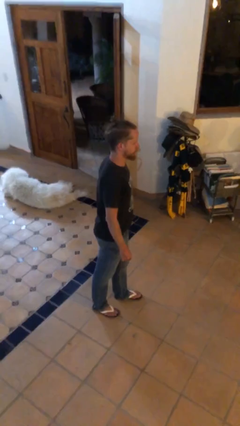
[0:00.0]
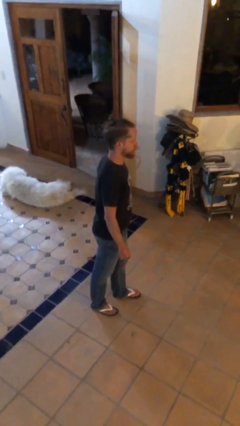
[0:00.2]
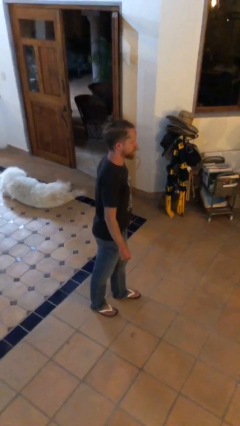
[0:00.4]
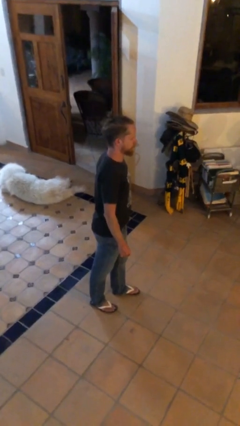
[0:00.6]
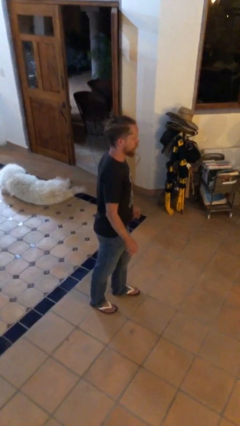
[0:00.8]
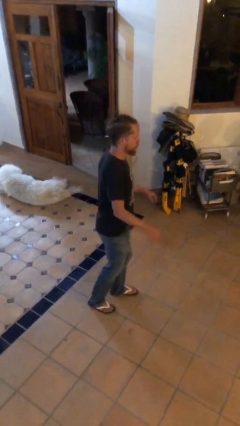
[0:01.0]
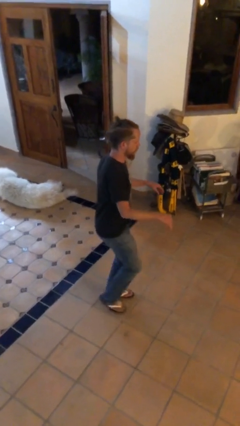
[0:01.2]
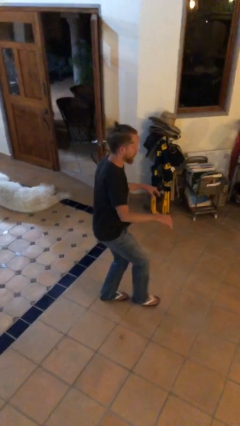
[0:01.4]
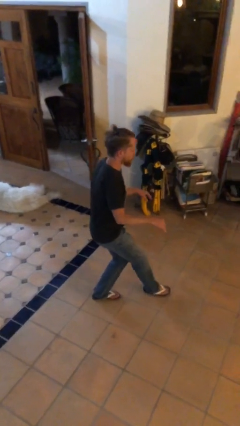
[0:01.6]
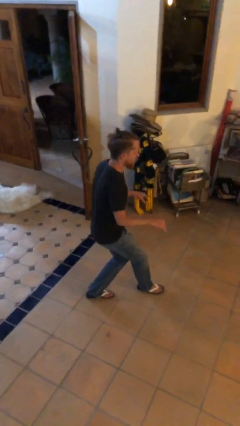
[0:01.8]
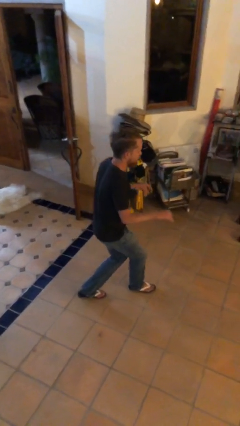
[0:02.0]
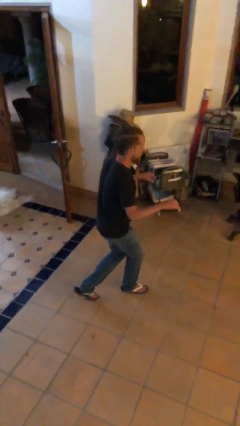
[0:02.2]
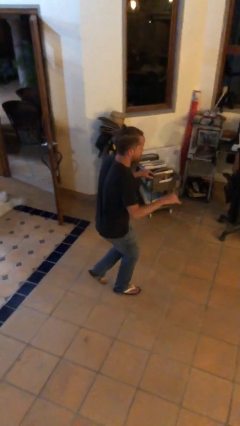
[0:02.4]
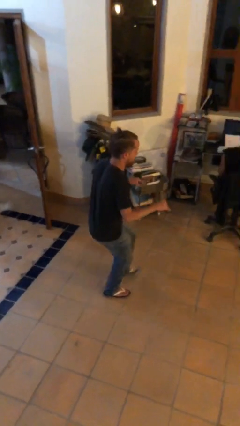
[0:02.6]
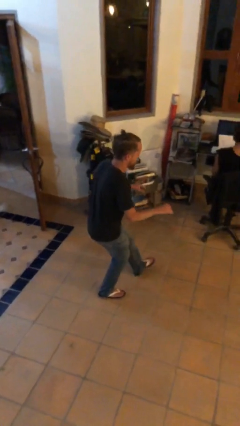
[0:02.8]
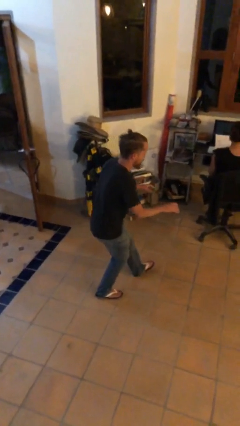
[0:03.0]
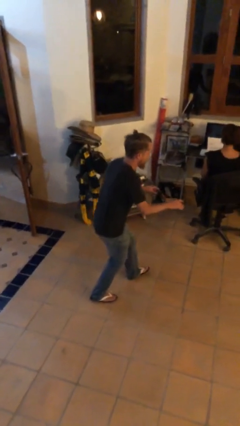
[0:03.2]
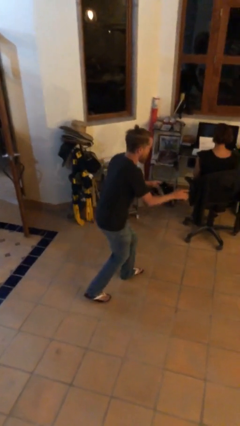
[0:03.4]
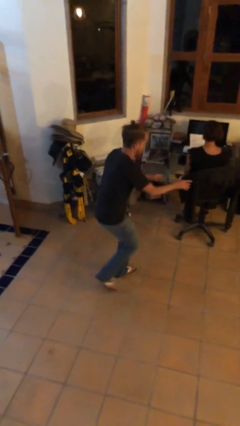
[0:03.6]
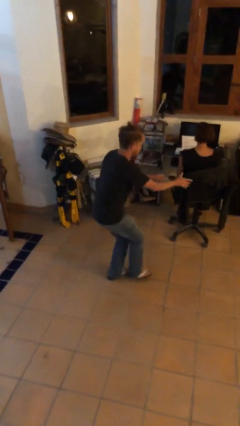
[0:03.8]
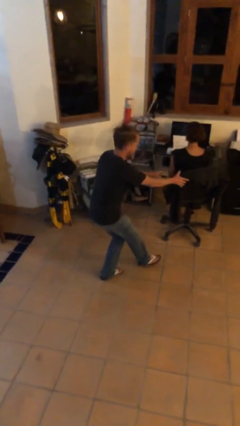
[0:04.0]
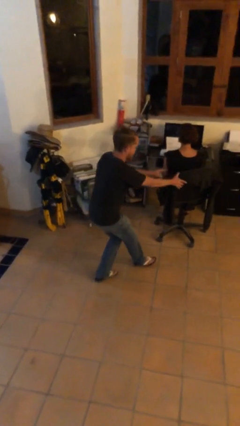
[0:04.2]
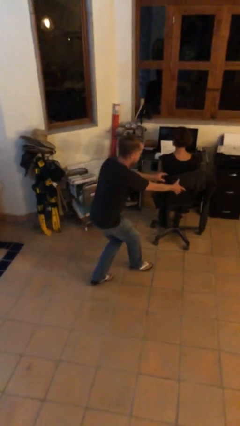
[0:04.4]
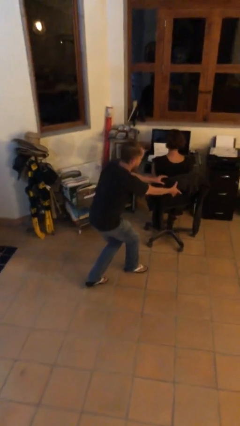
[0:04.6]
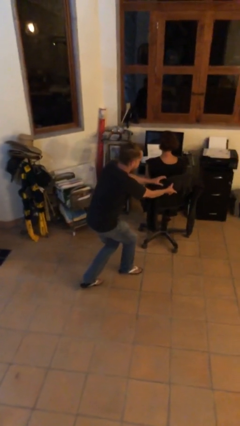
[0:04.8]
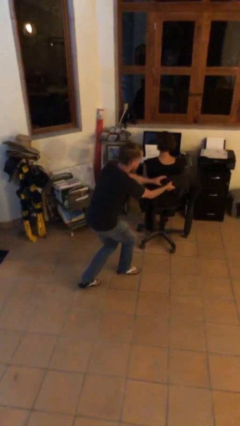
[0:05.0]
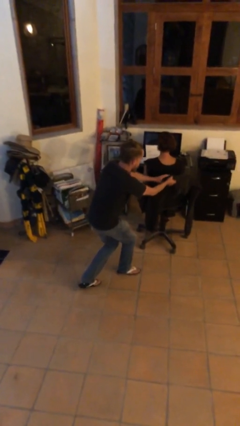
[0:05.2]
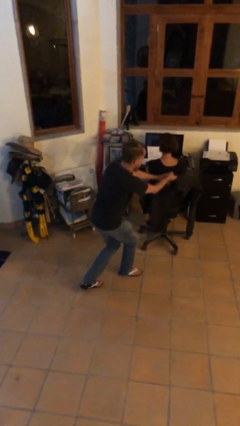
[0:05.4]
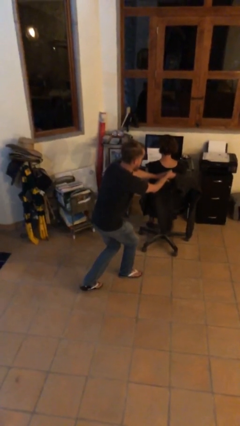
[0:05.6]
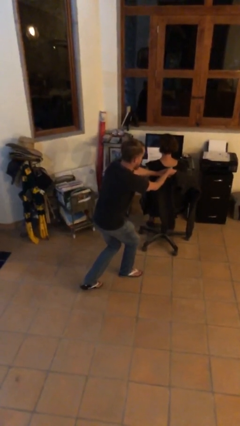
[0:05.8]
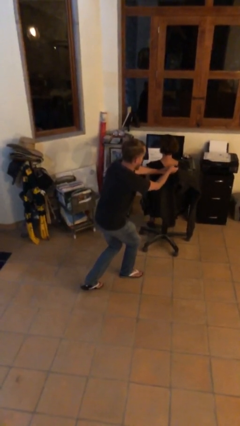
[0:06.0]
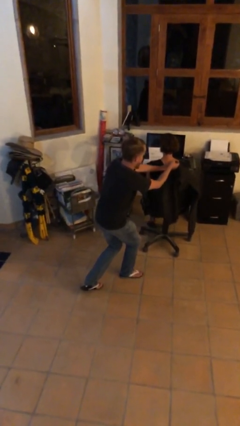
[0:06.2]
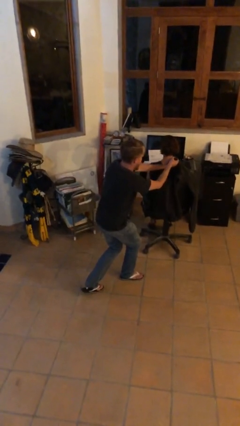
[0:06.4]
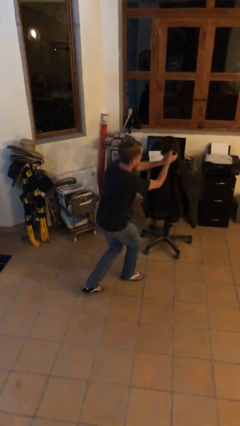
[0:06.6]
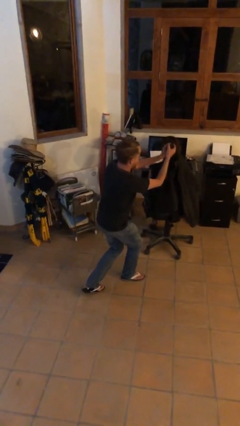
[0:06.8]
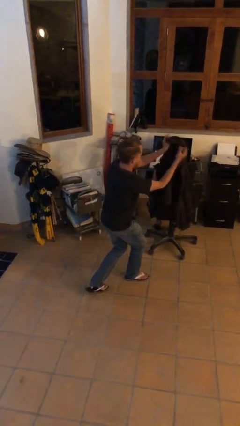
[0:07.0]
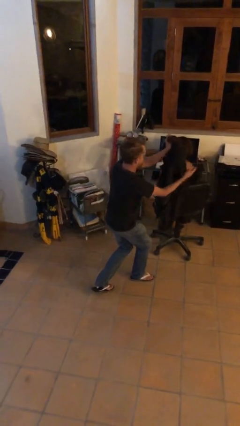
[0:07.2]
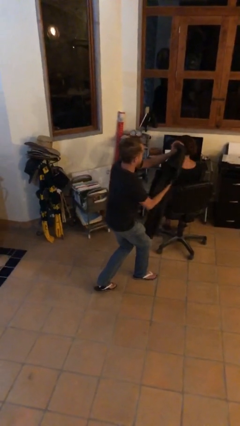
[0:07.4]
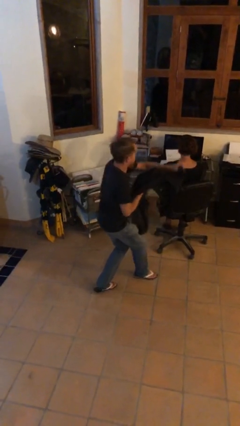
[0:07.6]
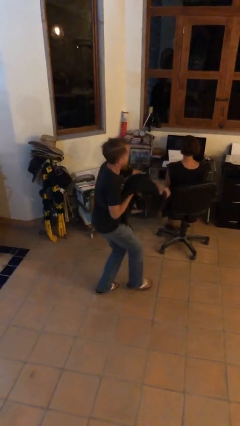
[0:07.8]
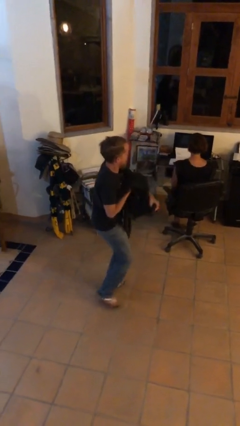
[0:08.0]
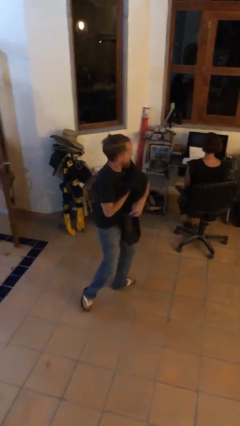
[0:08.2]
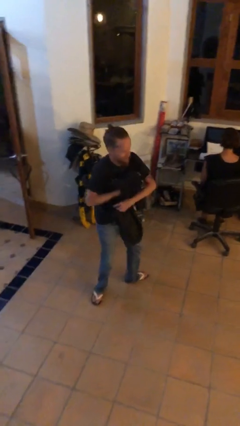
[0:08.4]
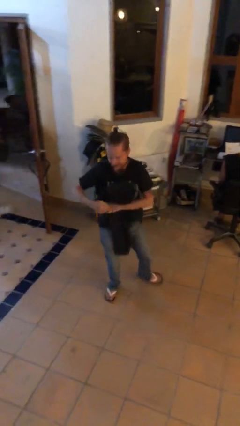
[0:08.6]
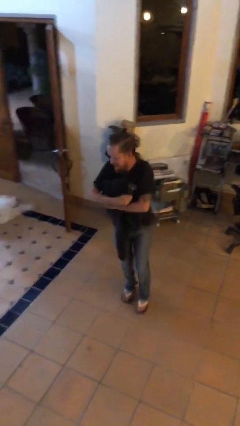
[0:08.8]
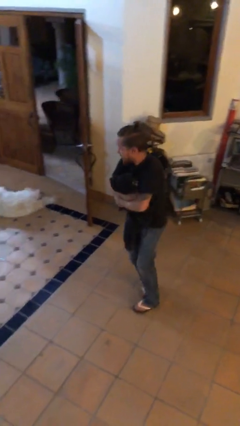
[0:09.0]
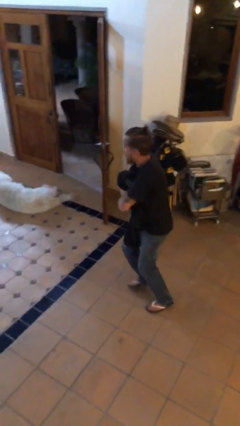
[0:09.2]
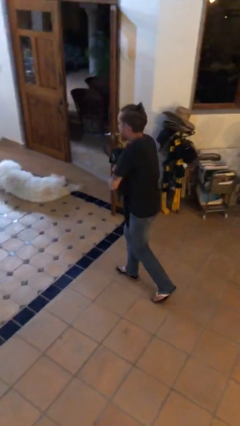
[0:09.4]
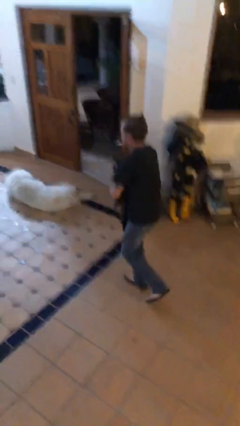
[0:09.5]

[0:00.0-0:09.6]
person steals object from person

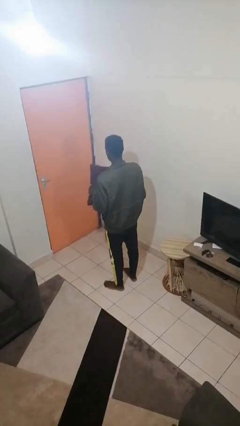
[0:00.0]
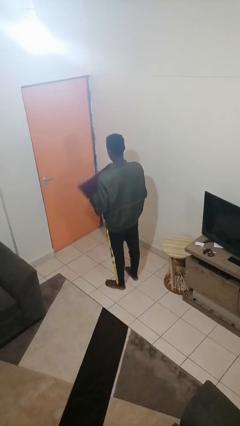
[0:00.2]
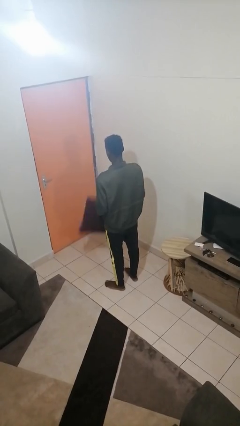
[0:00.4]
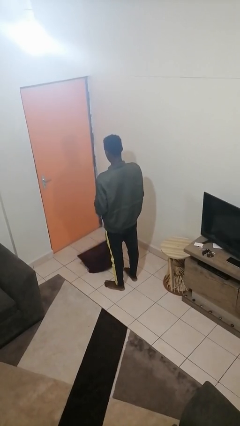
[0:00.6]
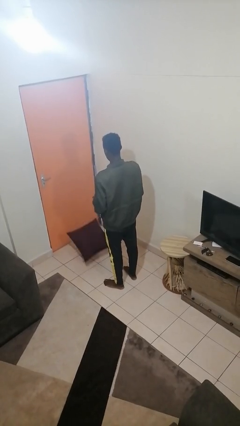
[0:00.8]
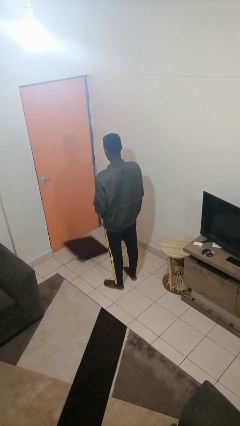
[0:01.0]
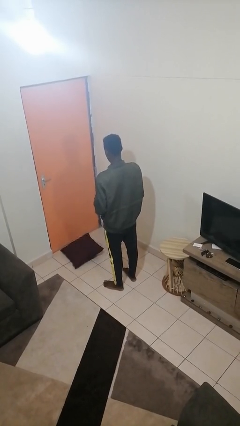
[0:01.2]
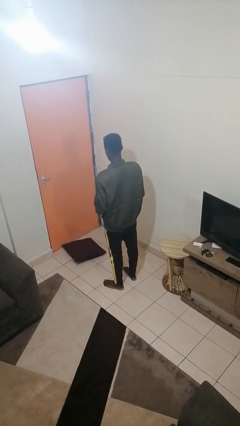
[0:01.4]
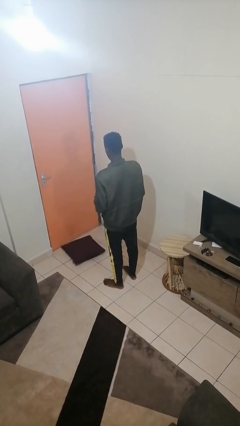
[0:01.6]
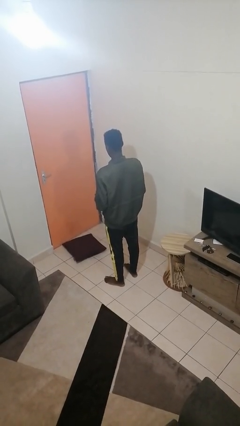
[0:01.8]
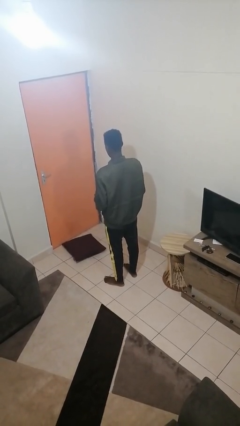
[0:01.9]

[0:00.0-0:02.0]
person drops object

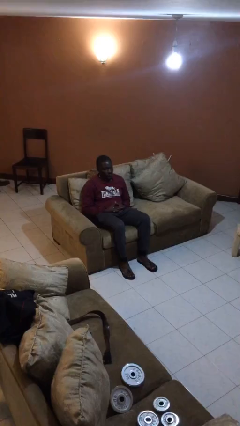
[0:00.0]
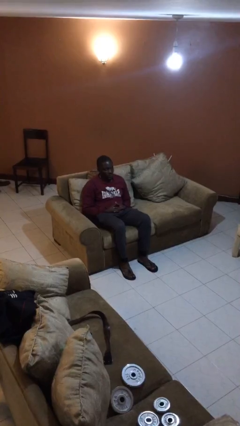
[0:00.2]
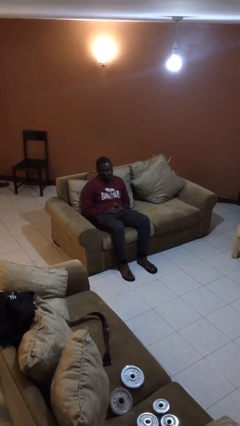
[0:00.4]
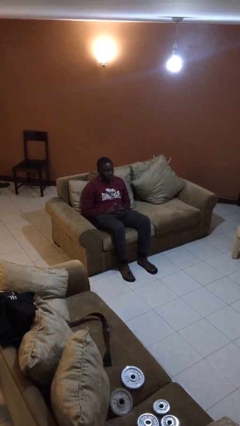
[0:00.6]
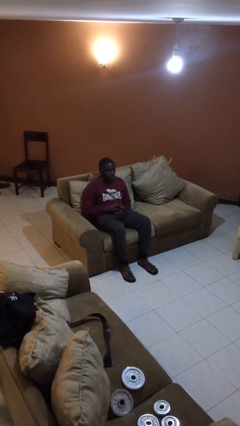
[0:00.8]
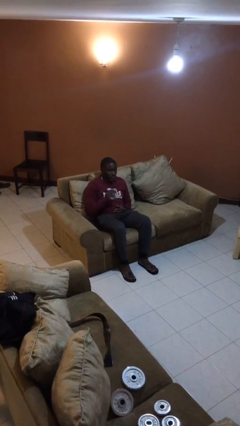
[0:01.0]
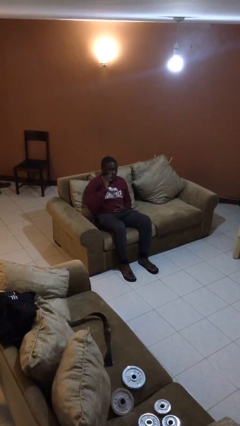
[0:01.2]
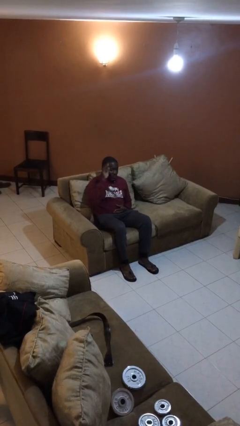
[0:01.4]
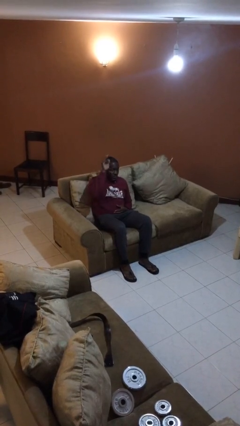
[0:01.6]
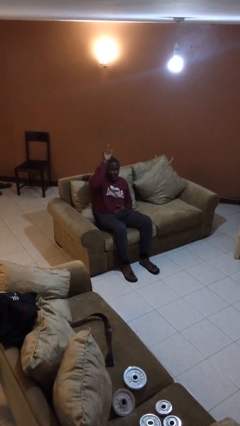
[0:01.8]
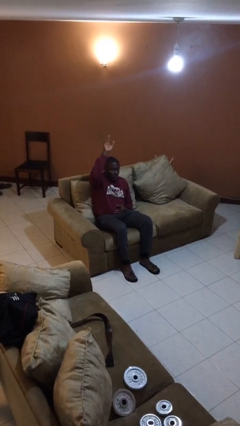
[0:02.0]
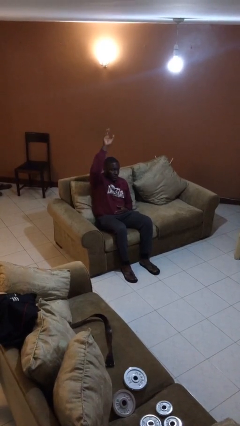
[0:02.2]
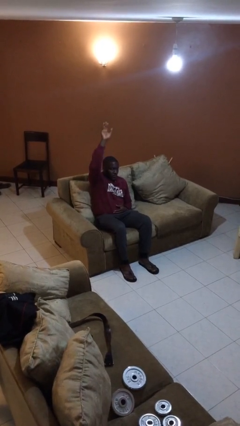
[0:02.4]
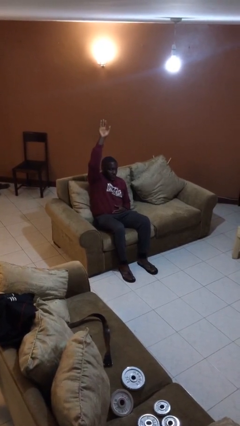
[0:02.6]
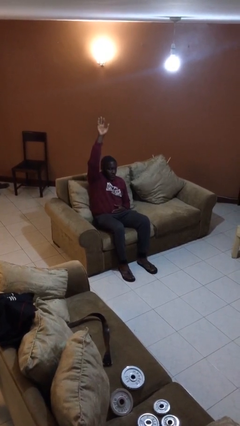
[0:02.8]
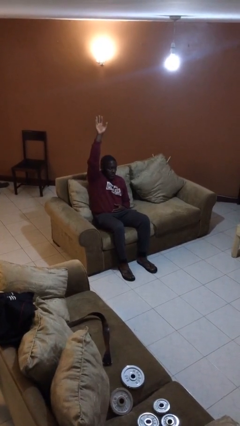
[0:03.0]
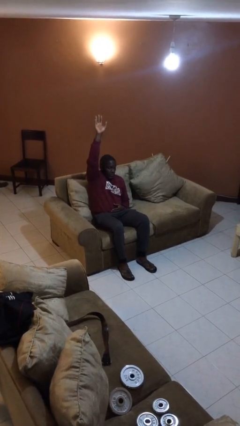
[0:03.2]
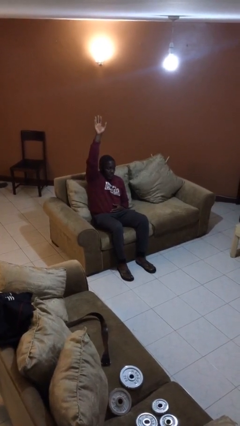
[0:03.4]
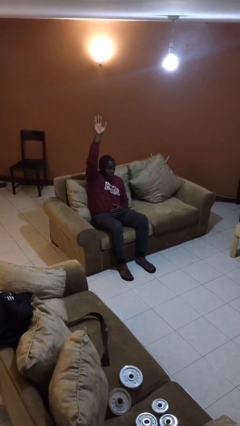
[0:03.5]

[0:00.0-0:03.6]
person gestures raise hand

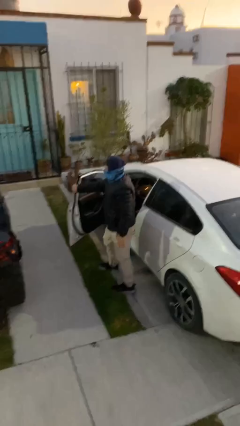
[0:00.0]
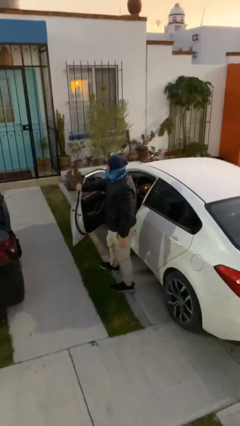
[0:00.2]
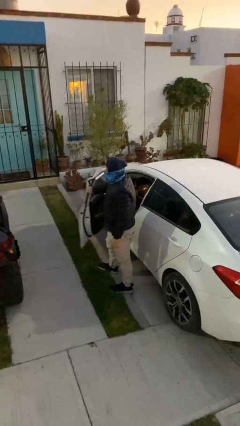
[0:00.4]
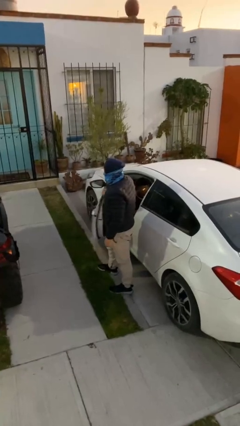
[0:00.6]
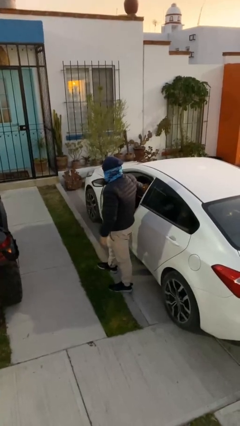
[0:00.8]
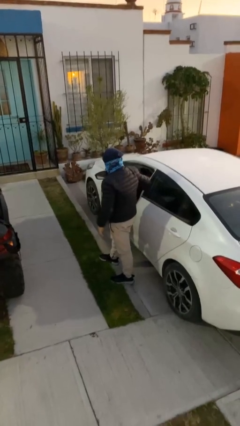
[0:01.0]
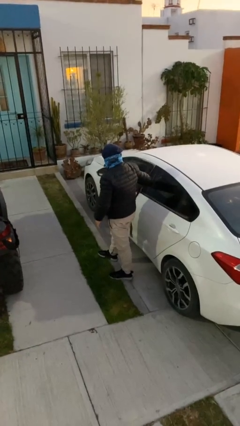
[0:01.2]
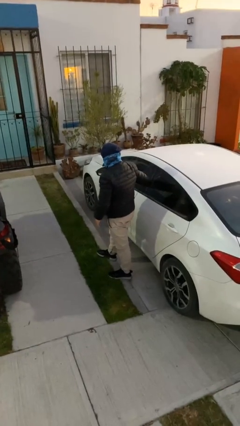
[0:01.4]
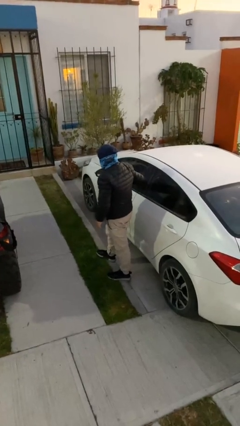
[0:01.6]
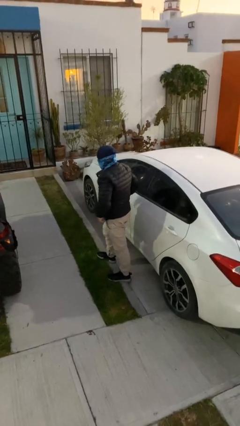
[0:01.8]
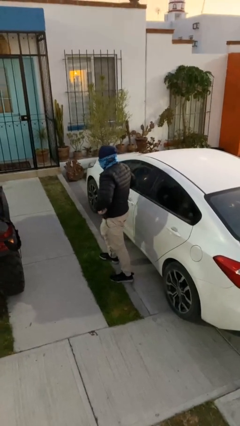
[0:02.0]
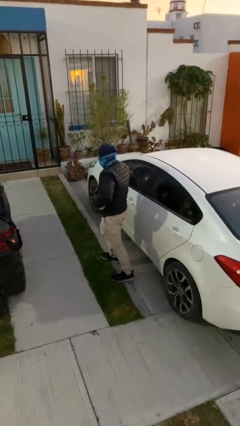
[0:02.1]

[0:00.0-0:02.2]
person closes car door

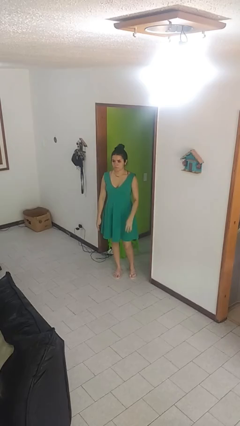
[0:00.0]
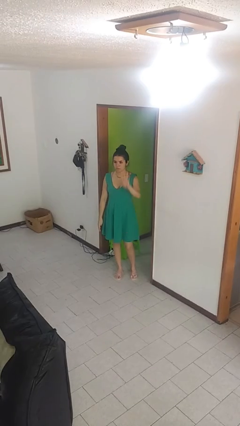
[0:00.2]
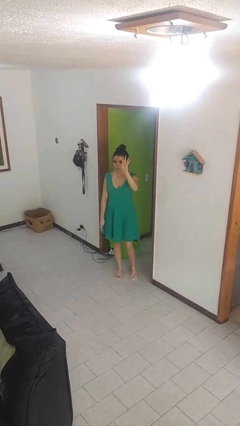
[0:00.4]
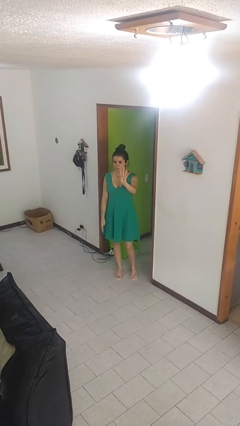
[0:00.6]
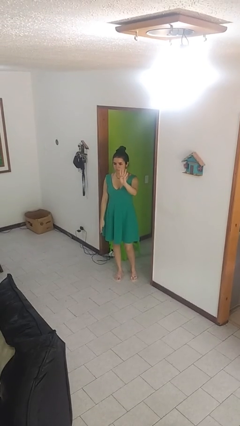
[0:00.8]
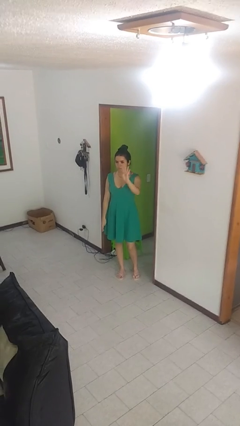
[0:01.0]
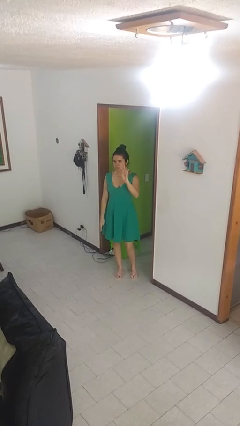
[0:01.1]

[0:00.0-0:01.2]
person gestures number four
